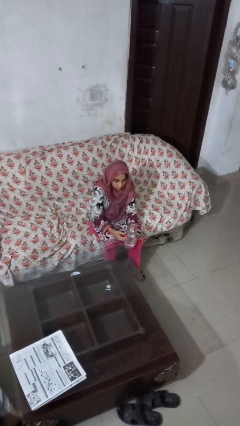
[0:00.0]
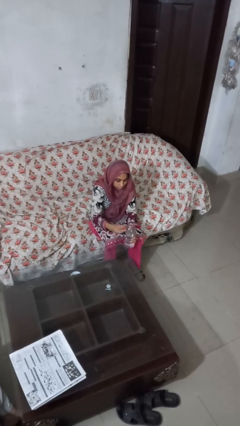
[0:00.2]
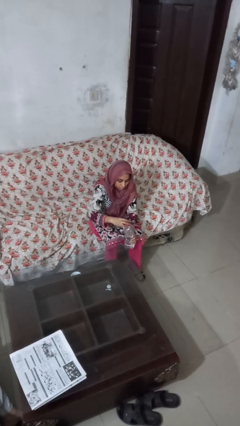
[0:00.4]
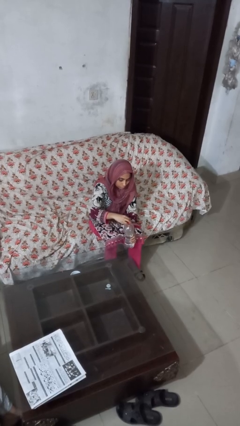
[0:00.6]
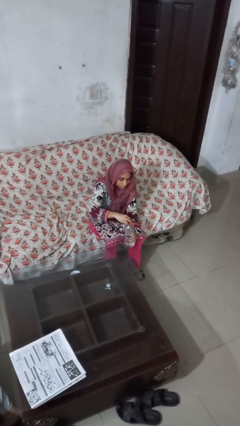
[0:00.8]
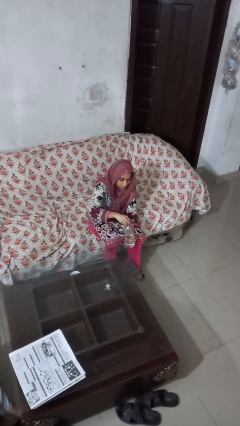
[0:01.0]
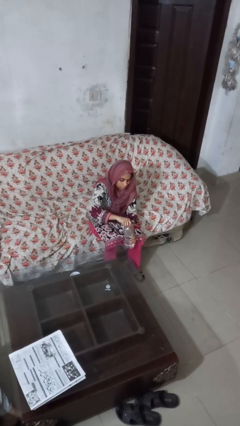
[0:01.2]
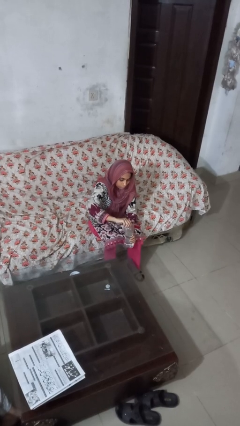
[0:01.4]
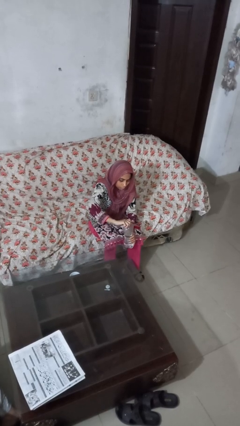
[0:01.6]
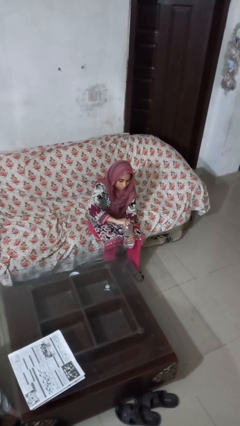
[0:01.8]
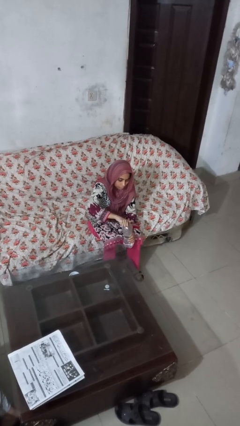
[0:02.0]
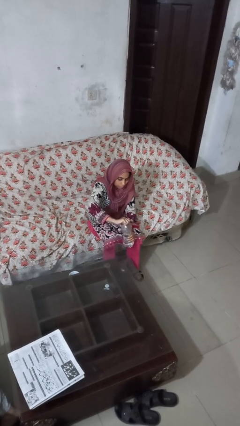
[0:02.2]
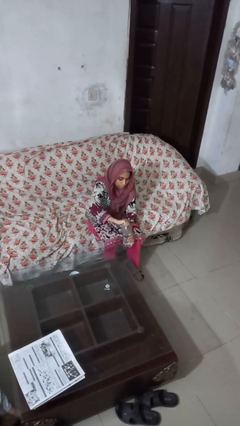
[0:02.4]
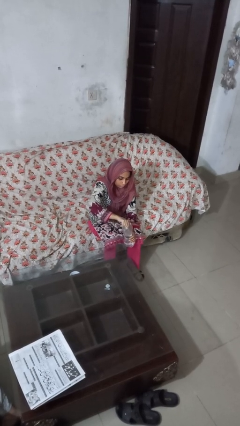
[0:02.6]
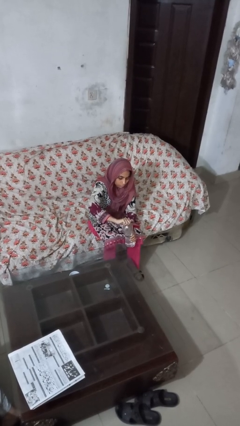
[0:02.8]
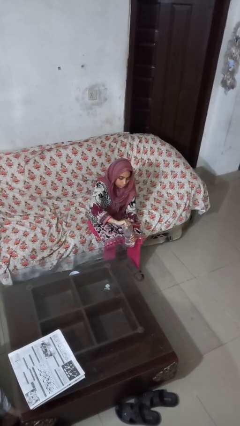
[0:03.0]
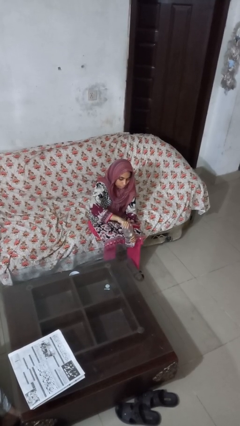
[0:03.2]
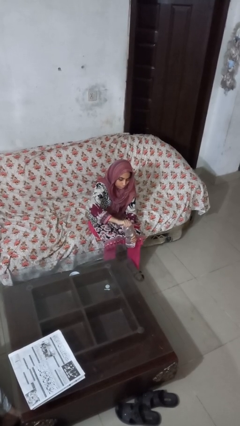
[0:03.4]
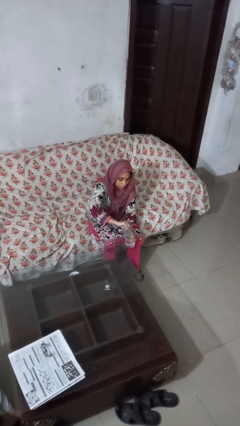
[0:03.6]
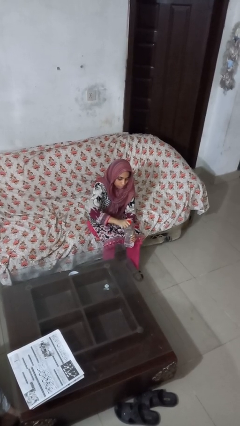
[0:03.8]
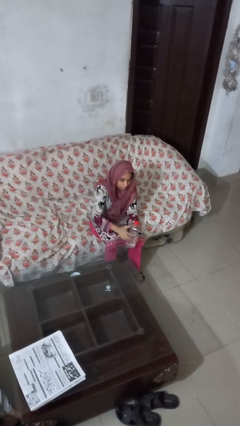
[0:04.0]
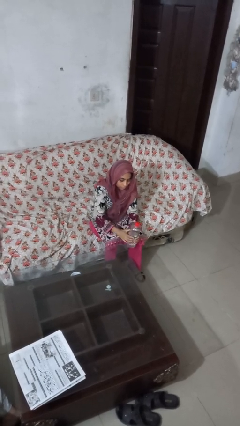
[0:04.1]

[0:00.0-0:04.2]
person screws lid to bottle

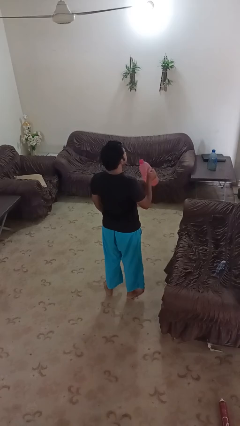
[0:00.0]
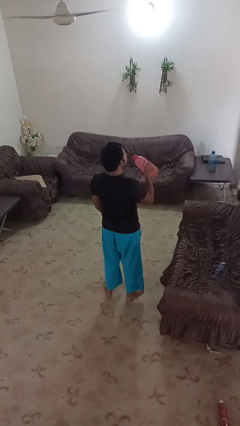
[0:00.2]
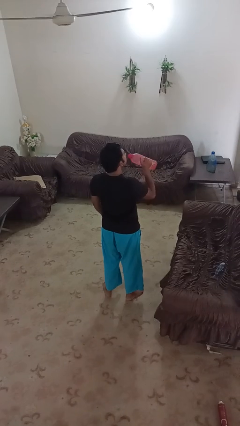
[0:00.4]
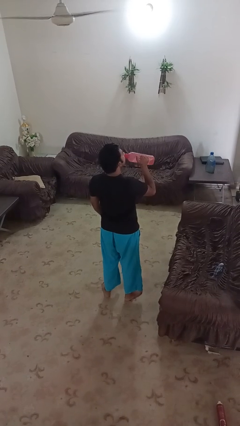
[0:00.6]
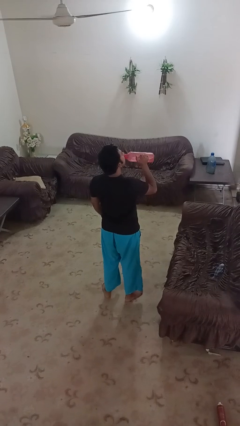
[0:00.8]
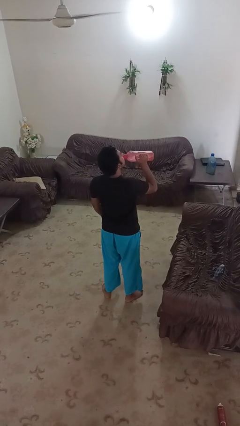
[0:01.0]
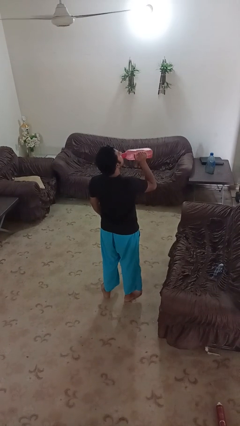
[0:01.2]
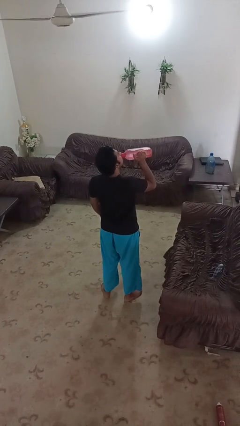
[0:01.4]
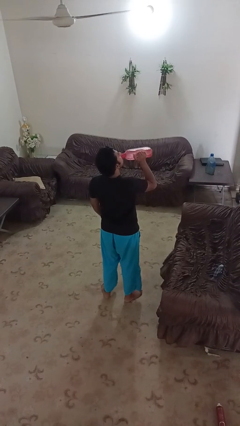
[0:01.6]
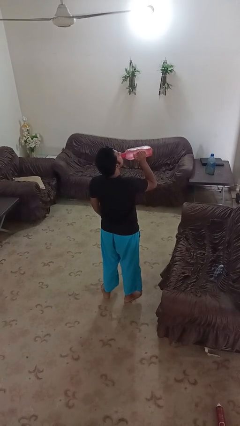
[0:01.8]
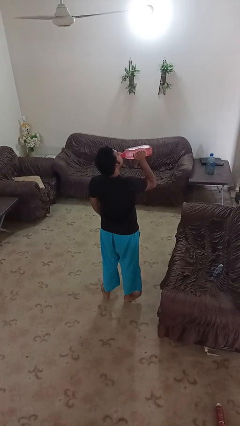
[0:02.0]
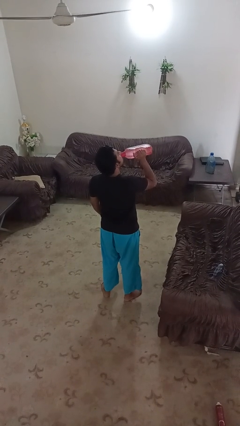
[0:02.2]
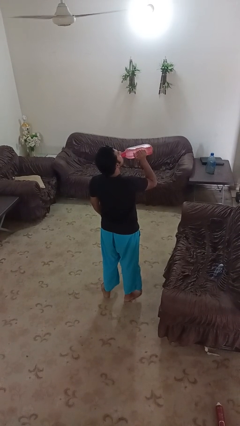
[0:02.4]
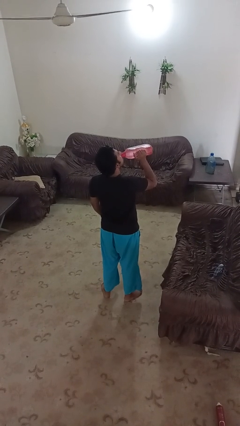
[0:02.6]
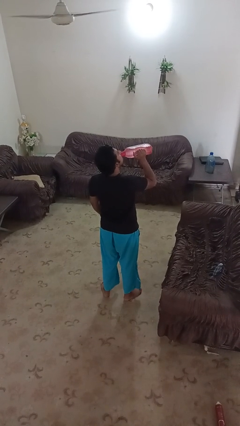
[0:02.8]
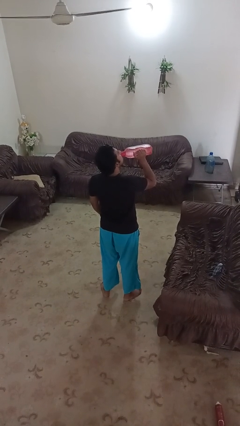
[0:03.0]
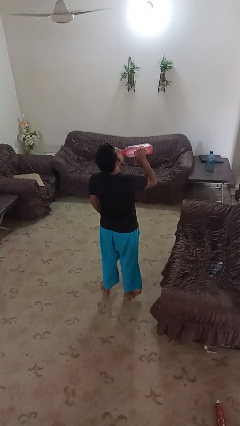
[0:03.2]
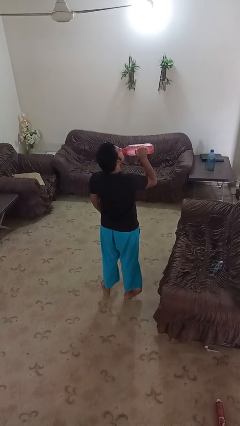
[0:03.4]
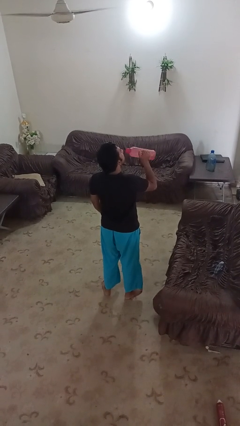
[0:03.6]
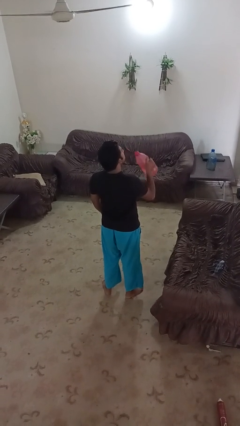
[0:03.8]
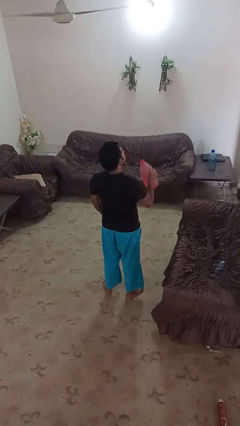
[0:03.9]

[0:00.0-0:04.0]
person drinks from bottle

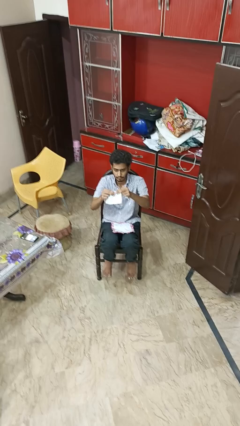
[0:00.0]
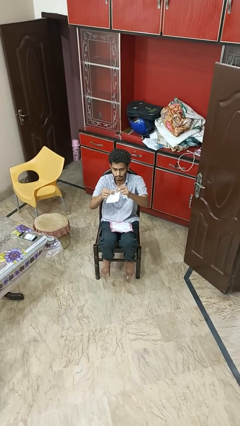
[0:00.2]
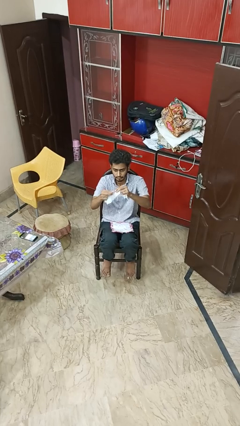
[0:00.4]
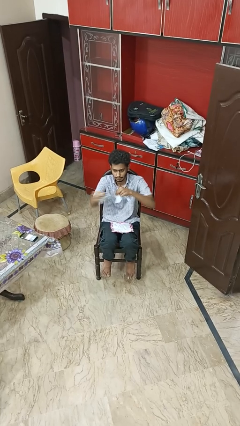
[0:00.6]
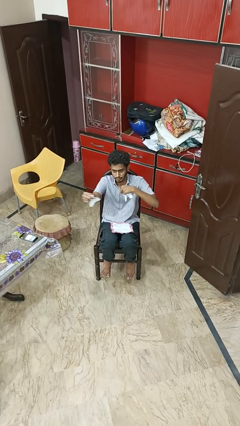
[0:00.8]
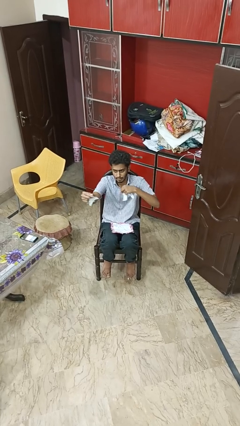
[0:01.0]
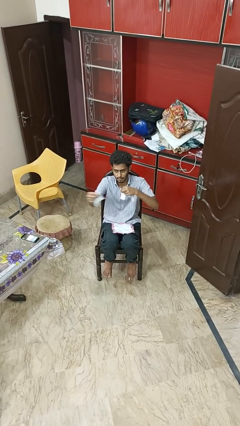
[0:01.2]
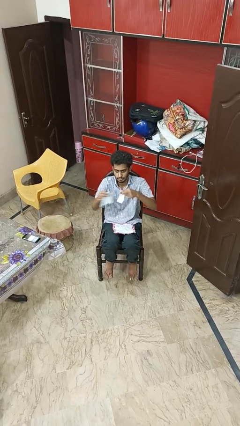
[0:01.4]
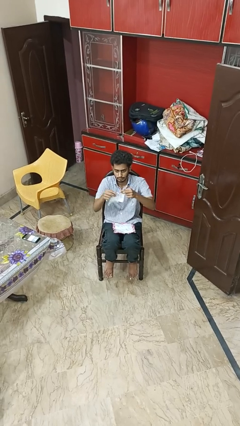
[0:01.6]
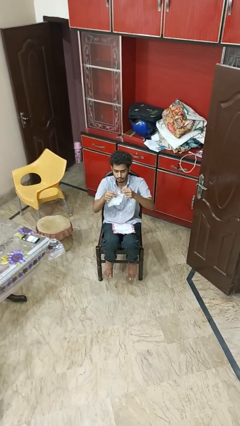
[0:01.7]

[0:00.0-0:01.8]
person tears paper

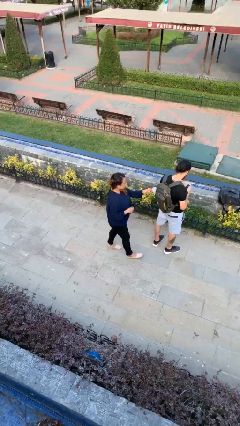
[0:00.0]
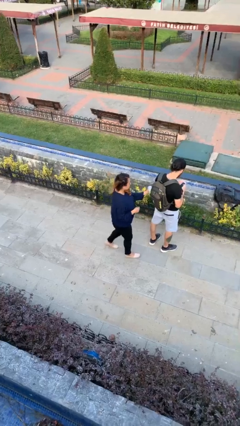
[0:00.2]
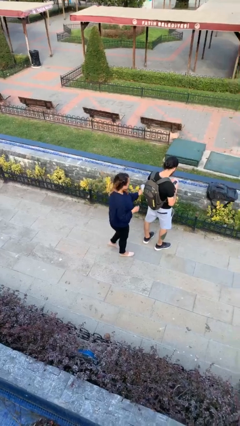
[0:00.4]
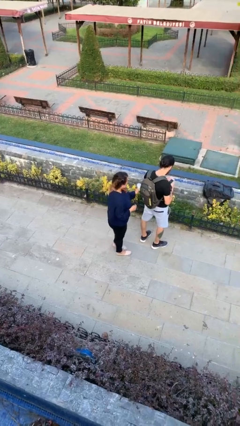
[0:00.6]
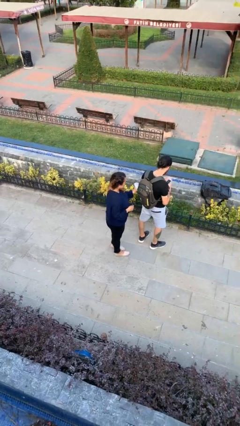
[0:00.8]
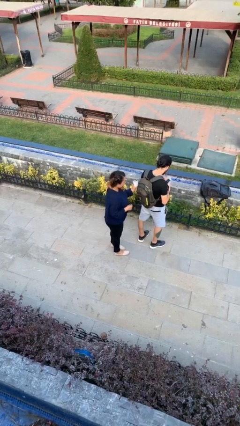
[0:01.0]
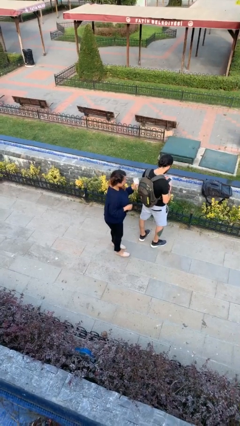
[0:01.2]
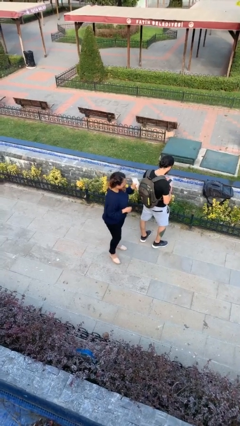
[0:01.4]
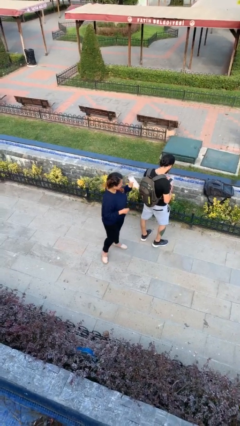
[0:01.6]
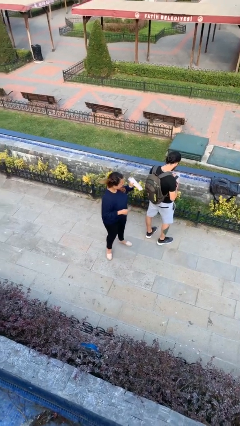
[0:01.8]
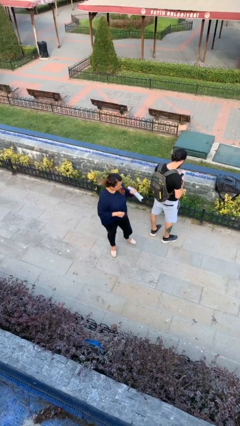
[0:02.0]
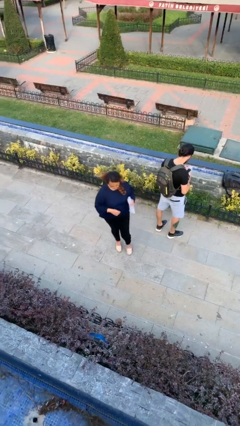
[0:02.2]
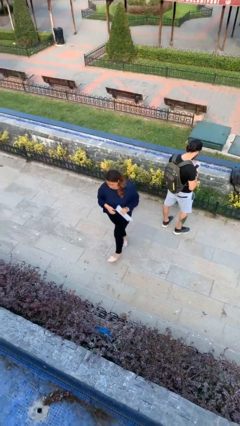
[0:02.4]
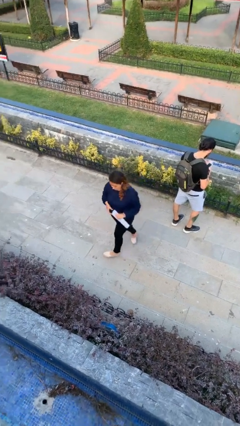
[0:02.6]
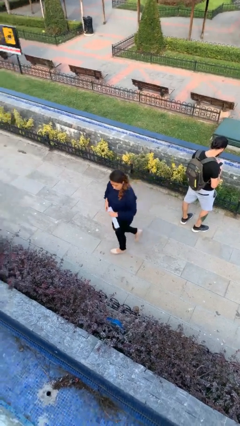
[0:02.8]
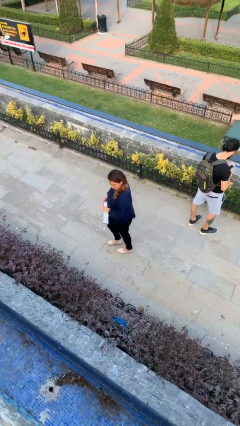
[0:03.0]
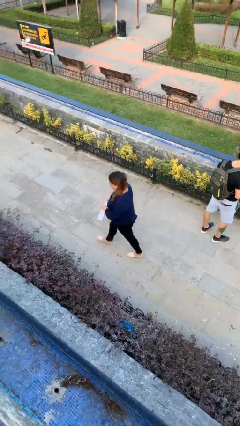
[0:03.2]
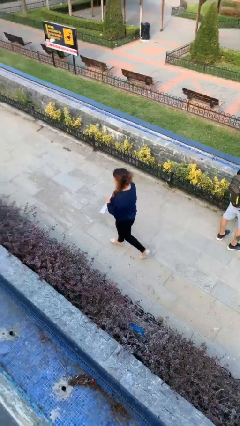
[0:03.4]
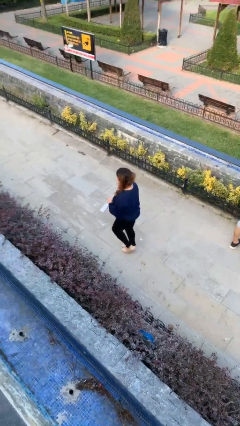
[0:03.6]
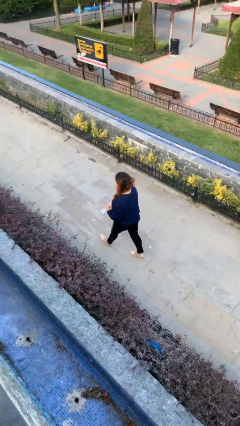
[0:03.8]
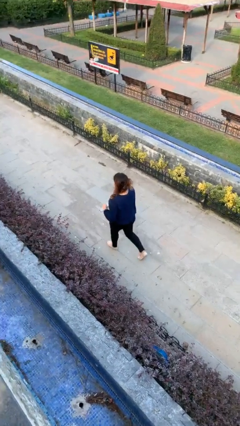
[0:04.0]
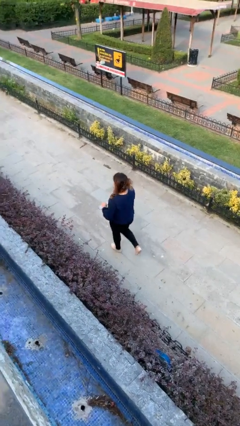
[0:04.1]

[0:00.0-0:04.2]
person steals object from person

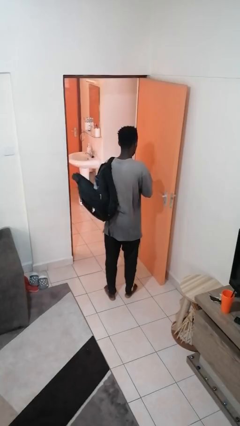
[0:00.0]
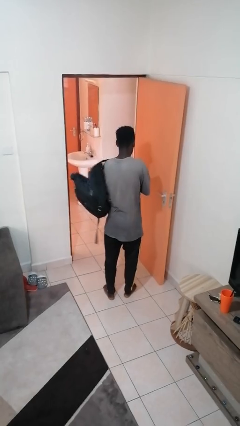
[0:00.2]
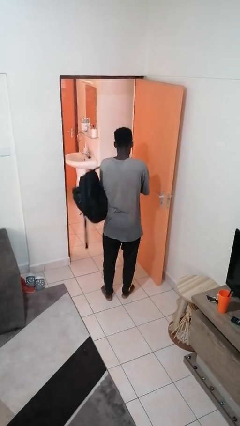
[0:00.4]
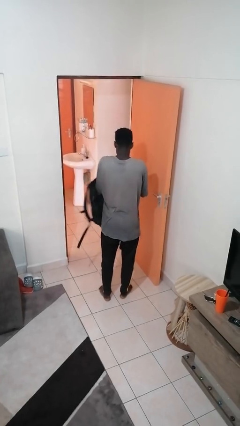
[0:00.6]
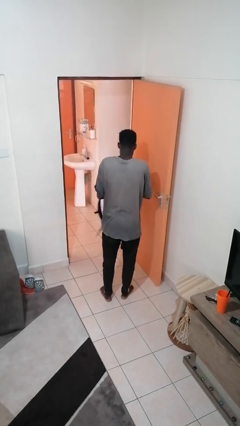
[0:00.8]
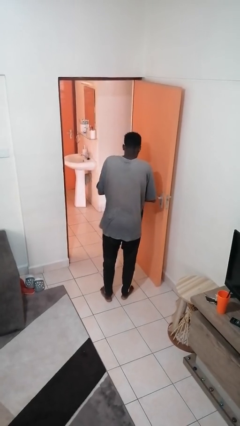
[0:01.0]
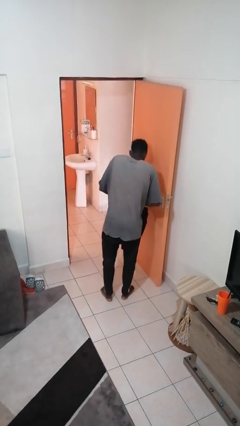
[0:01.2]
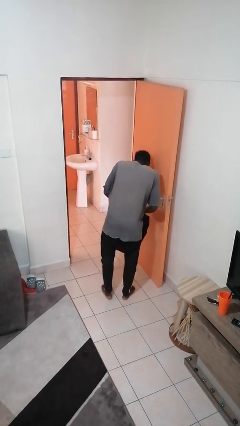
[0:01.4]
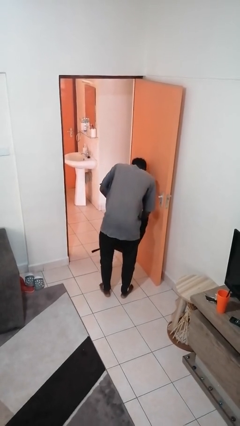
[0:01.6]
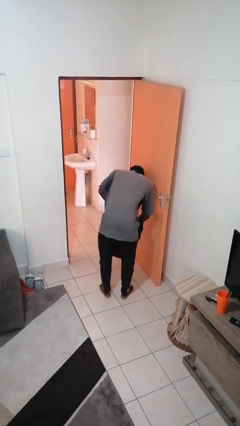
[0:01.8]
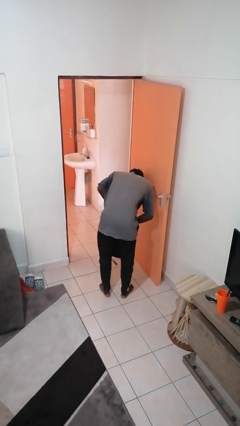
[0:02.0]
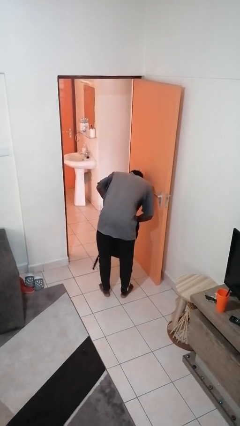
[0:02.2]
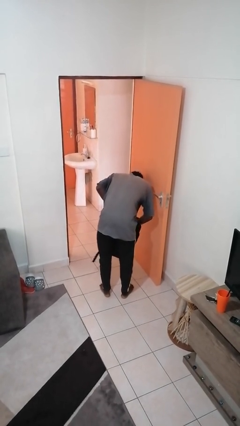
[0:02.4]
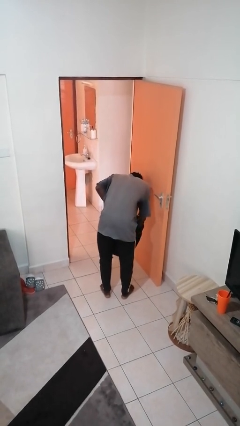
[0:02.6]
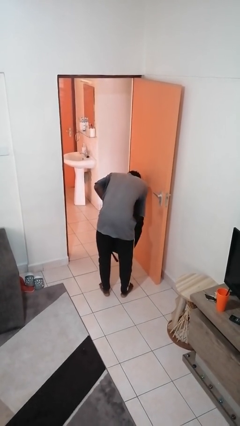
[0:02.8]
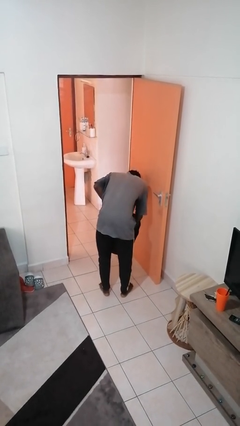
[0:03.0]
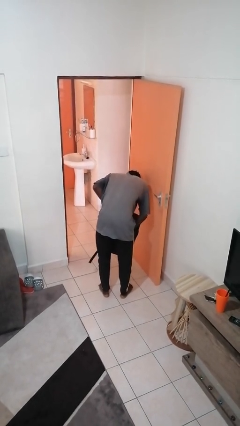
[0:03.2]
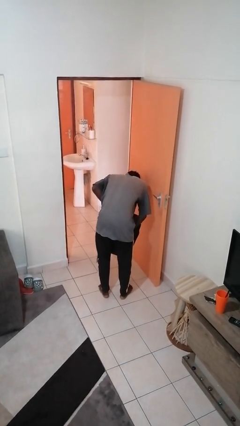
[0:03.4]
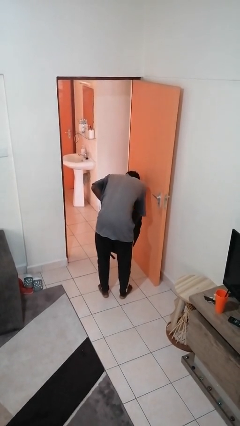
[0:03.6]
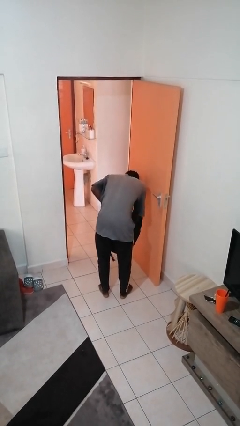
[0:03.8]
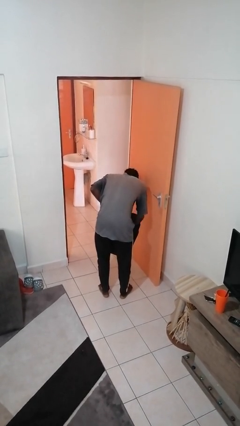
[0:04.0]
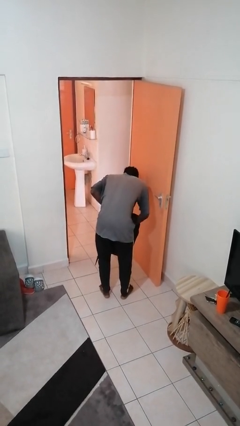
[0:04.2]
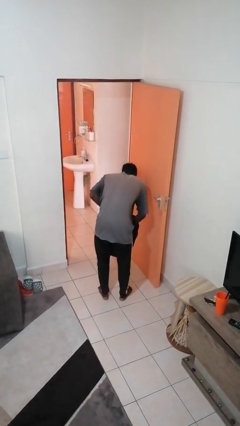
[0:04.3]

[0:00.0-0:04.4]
person searches in backpack
